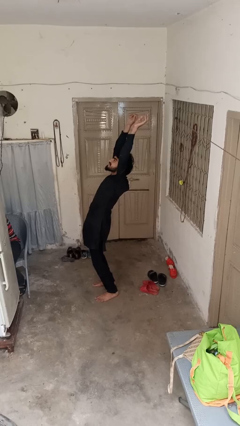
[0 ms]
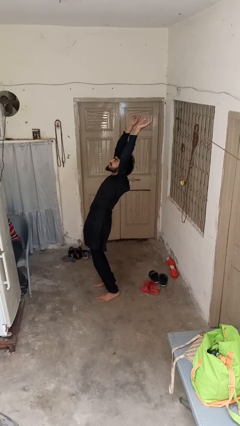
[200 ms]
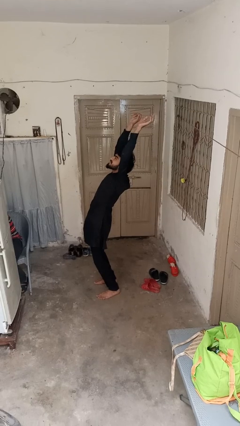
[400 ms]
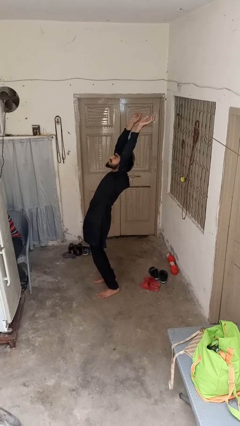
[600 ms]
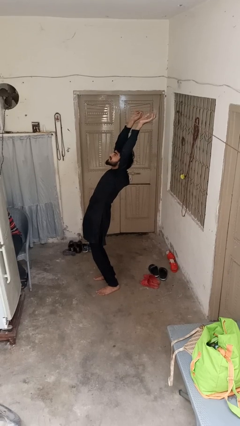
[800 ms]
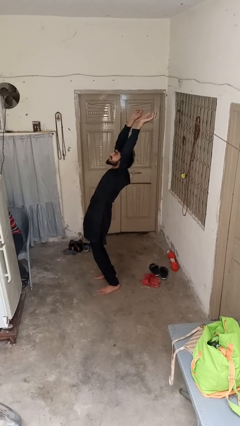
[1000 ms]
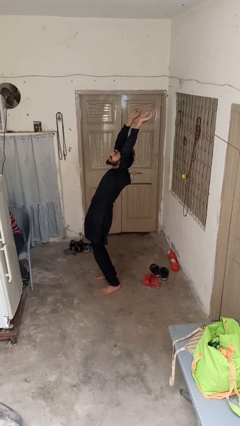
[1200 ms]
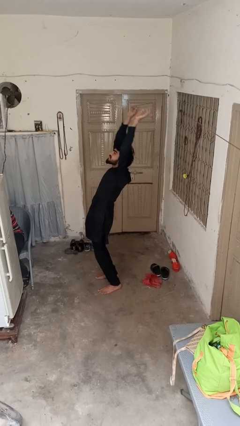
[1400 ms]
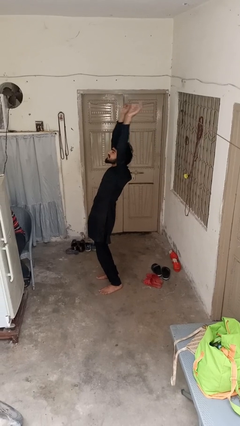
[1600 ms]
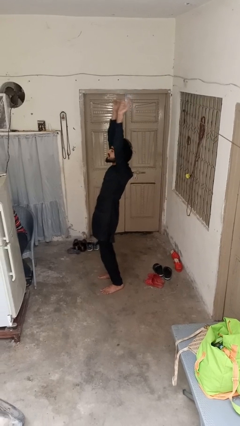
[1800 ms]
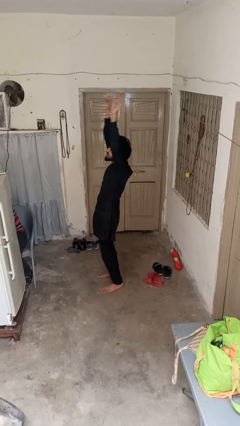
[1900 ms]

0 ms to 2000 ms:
person stretches arms over head

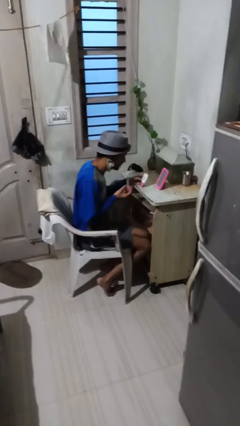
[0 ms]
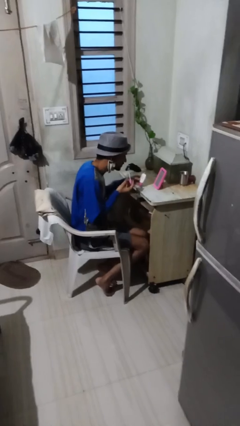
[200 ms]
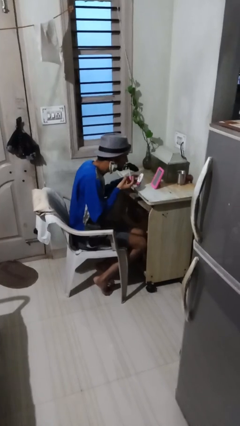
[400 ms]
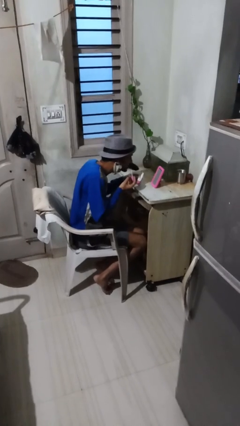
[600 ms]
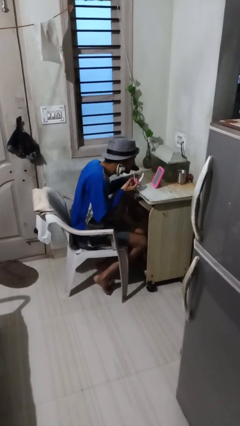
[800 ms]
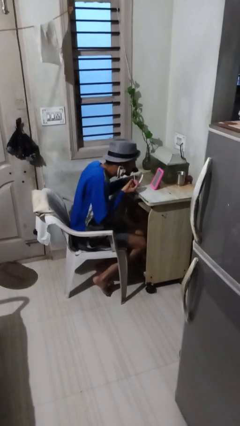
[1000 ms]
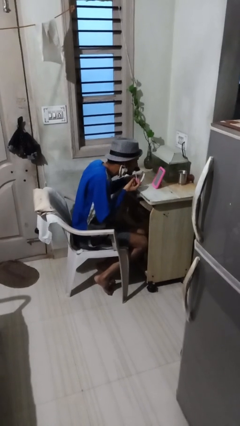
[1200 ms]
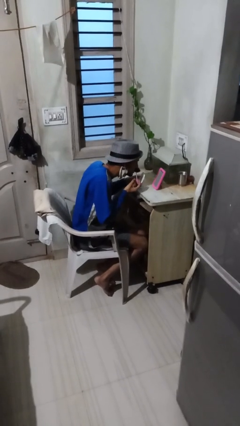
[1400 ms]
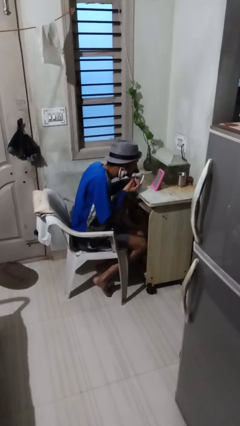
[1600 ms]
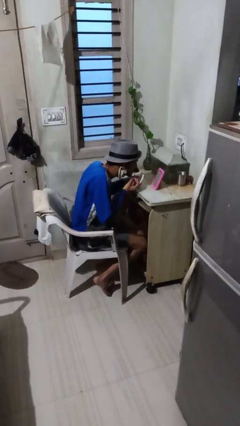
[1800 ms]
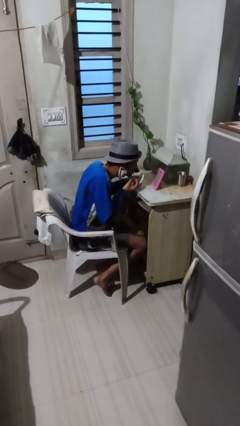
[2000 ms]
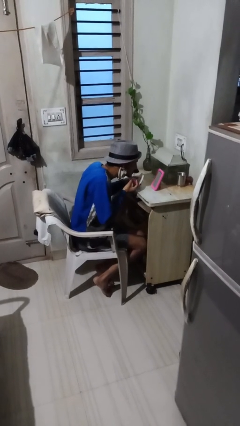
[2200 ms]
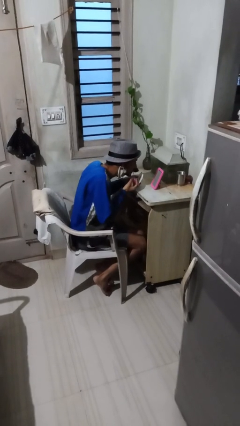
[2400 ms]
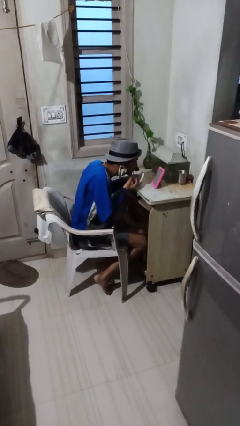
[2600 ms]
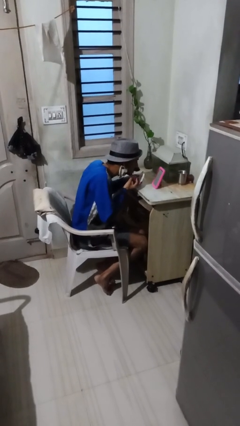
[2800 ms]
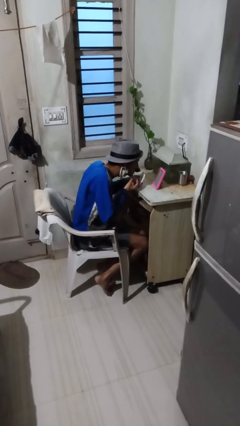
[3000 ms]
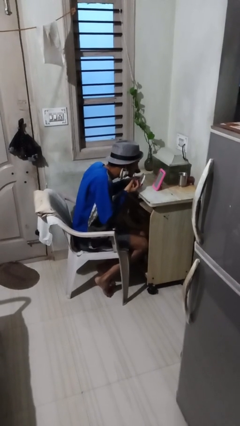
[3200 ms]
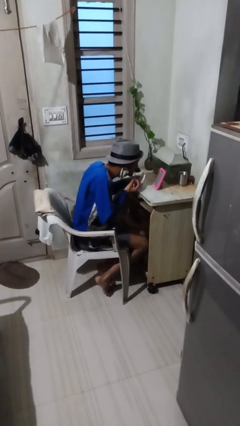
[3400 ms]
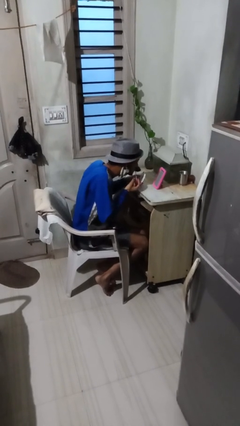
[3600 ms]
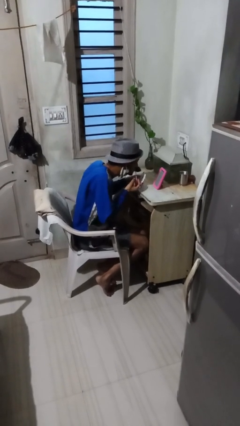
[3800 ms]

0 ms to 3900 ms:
person applies lip makeup

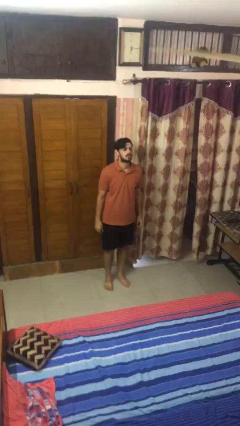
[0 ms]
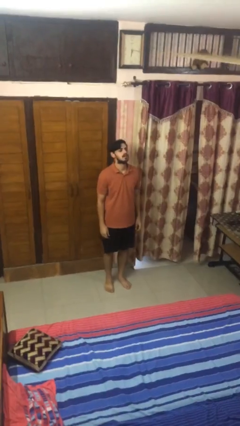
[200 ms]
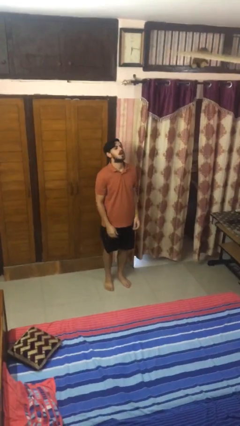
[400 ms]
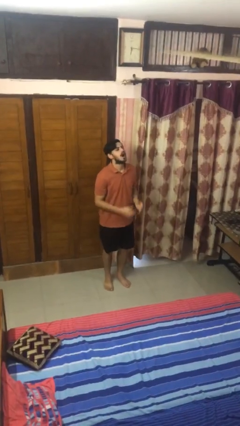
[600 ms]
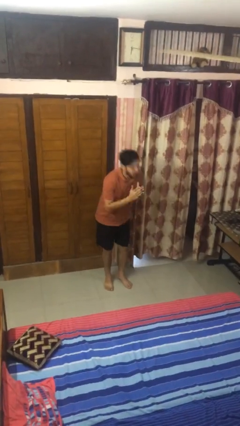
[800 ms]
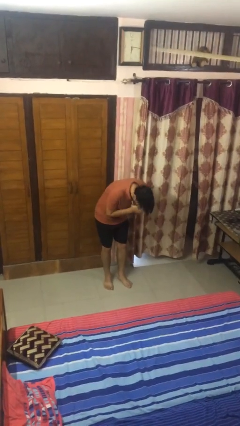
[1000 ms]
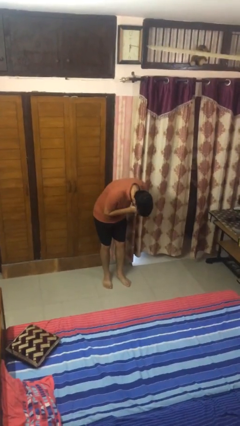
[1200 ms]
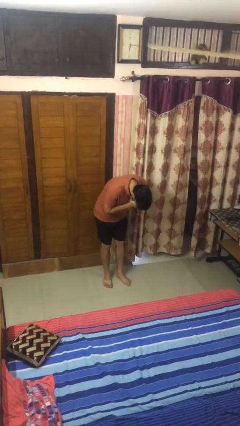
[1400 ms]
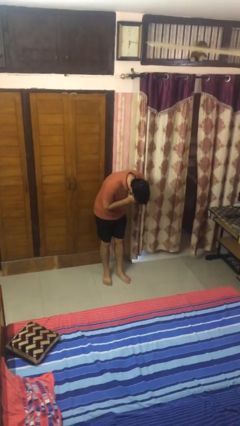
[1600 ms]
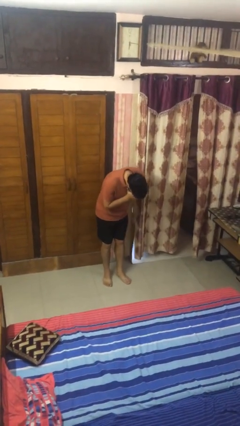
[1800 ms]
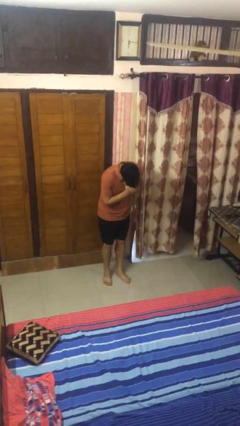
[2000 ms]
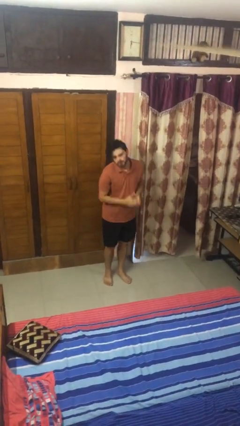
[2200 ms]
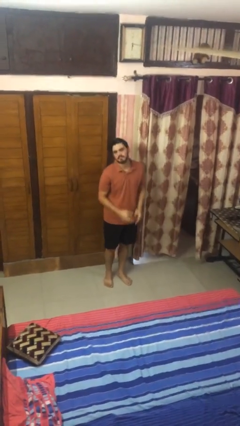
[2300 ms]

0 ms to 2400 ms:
person sneezes into hand

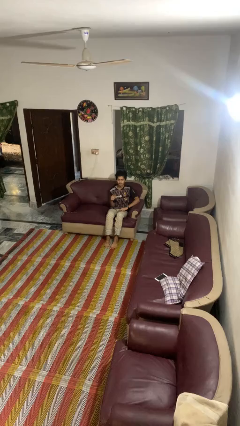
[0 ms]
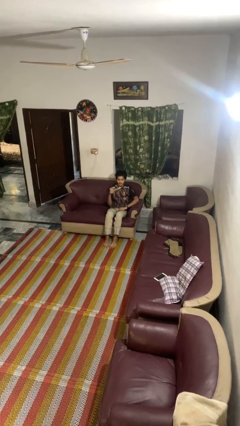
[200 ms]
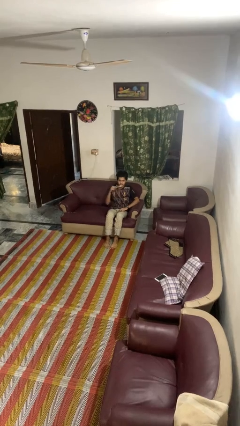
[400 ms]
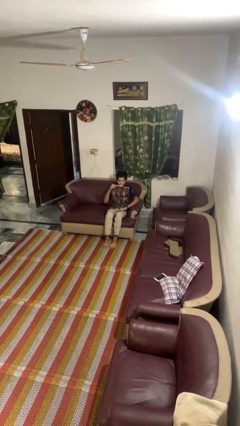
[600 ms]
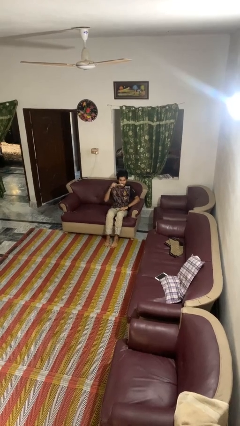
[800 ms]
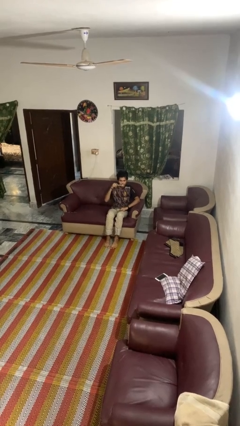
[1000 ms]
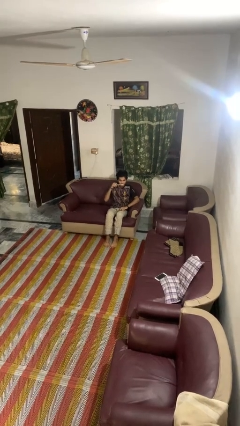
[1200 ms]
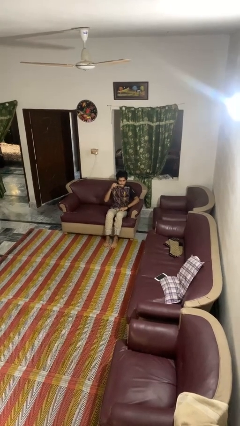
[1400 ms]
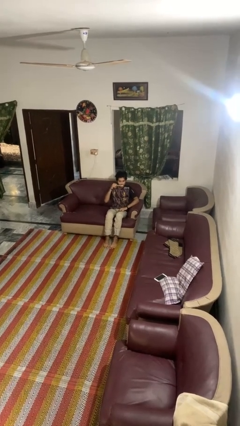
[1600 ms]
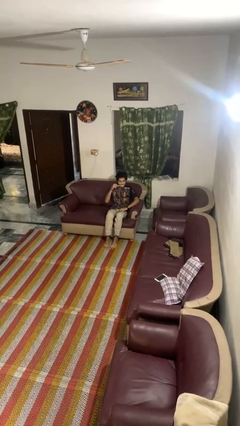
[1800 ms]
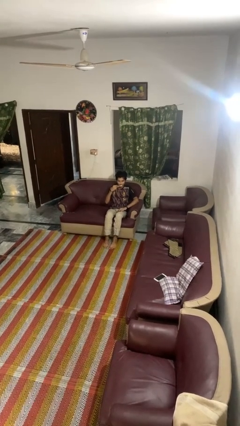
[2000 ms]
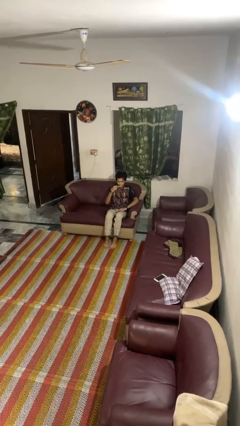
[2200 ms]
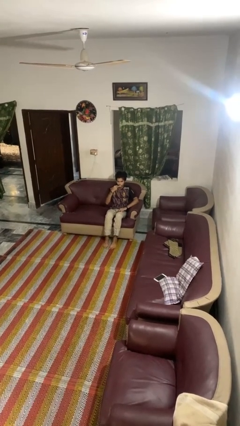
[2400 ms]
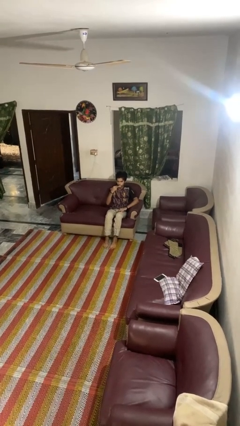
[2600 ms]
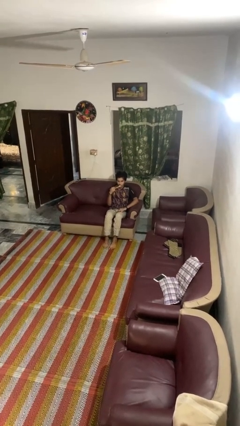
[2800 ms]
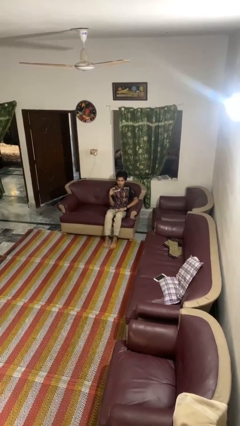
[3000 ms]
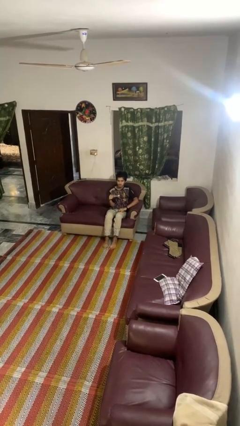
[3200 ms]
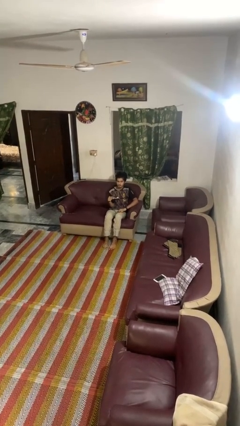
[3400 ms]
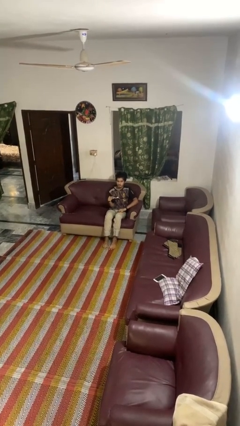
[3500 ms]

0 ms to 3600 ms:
person brushes teeth

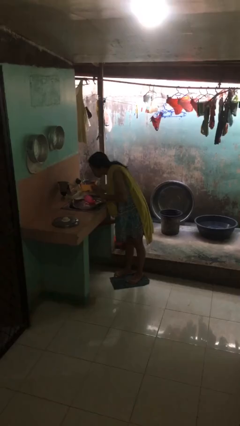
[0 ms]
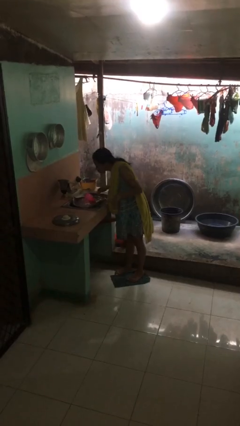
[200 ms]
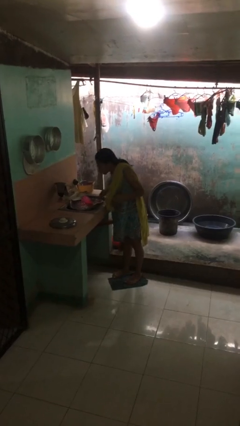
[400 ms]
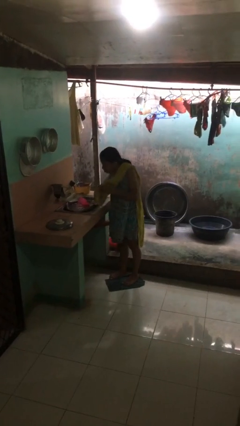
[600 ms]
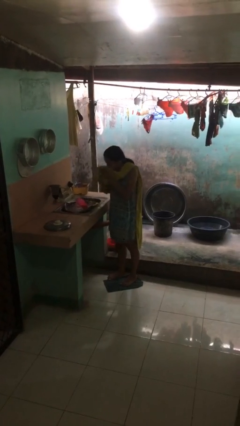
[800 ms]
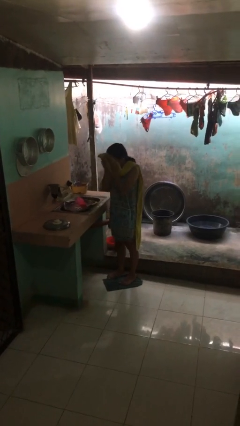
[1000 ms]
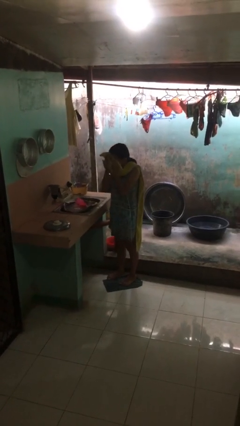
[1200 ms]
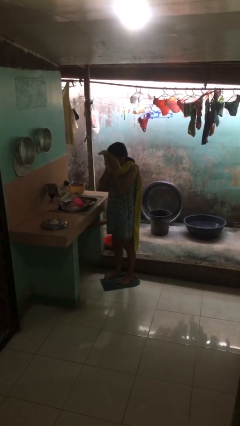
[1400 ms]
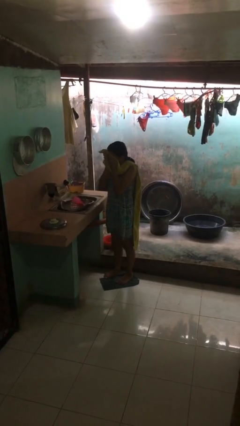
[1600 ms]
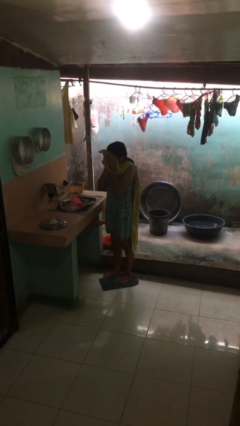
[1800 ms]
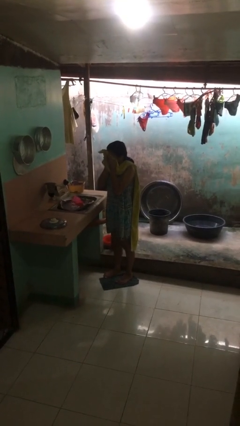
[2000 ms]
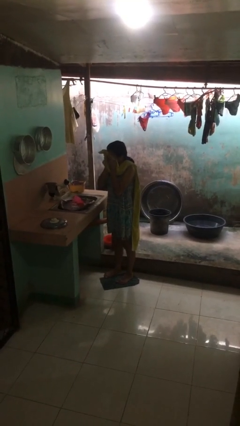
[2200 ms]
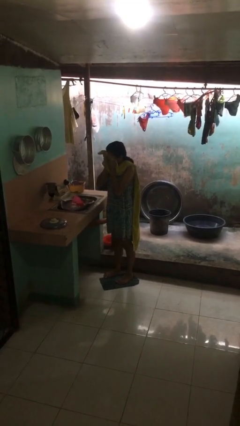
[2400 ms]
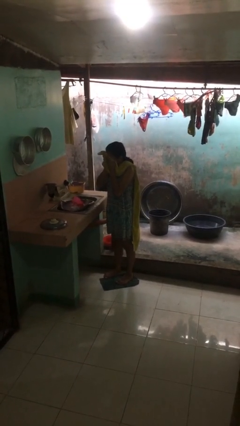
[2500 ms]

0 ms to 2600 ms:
person dries face with towel

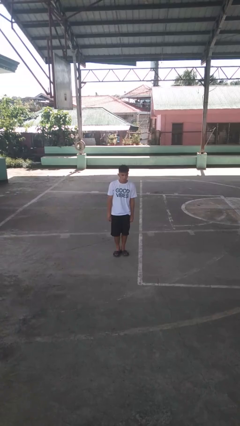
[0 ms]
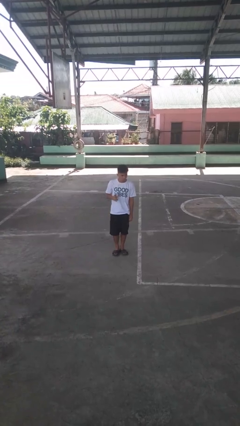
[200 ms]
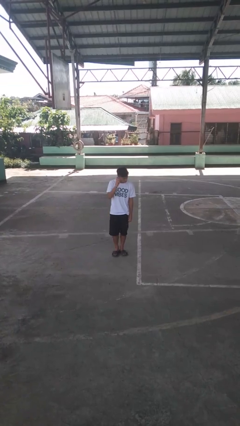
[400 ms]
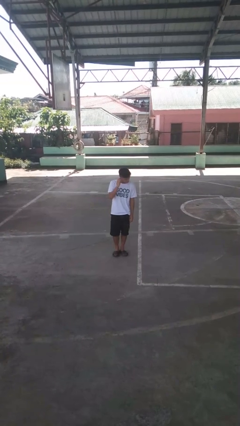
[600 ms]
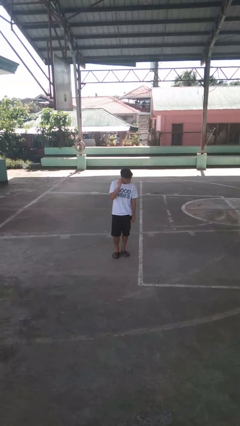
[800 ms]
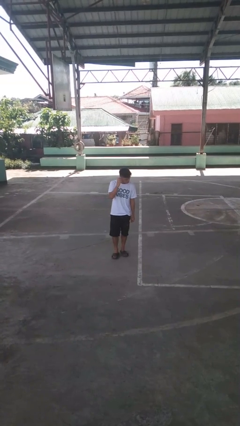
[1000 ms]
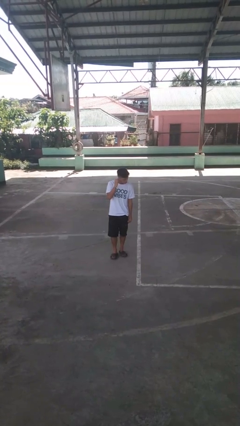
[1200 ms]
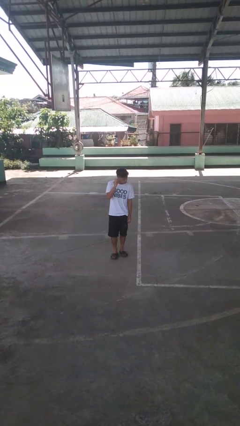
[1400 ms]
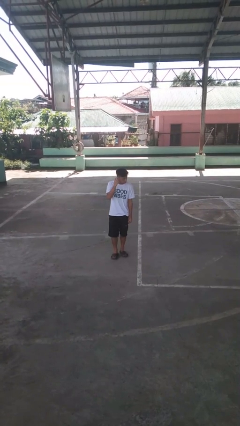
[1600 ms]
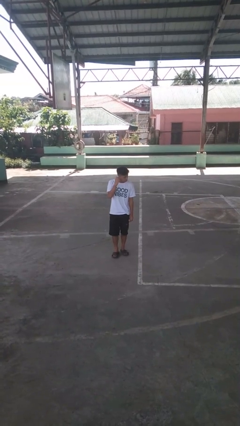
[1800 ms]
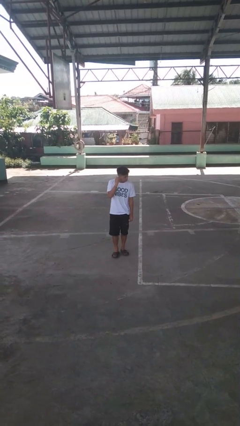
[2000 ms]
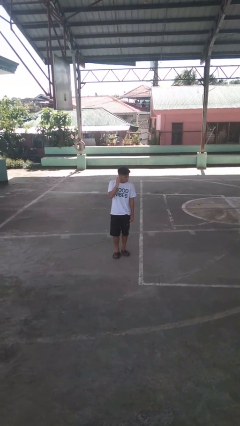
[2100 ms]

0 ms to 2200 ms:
person touches earlobe

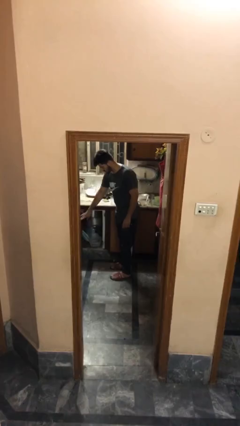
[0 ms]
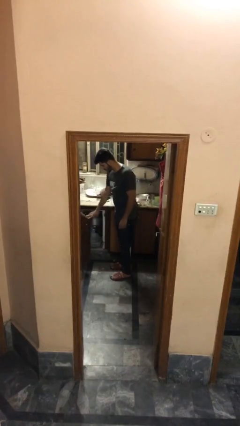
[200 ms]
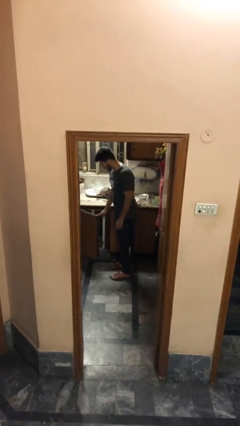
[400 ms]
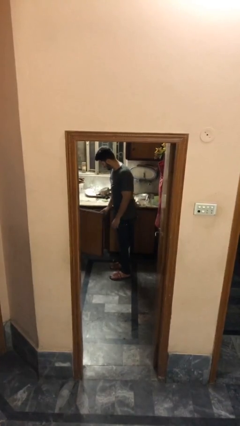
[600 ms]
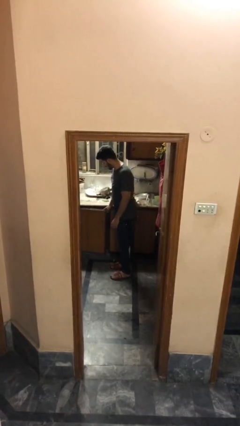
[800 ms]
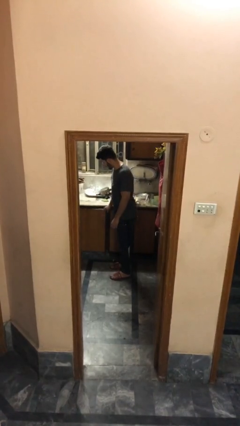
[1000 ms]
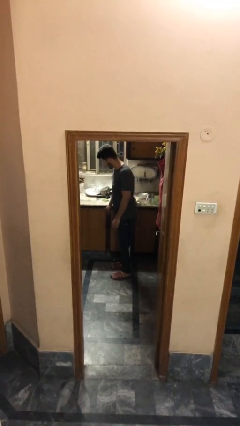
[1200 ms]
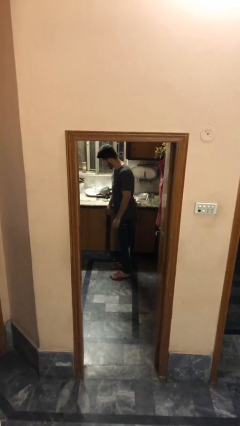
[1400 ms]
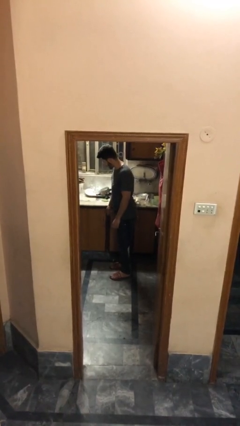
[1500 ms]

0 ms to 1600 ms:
person closes cabinet
